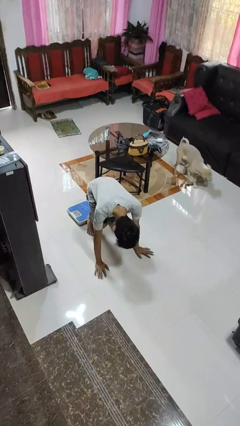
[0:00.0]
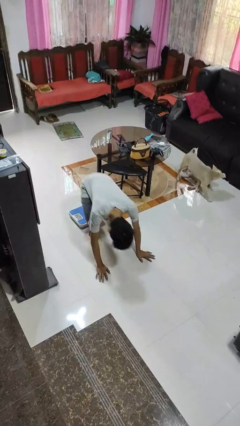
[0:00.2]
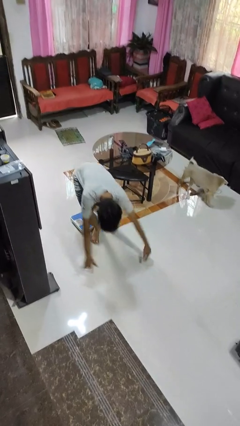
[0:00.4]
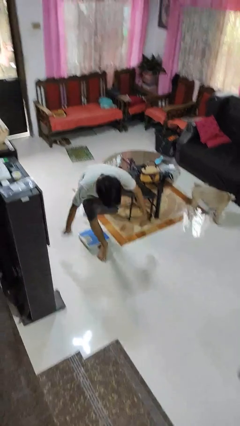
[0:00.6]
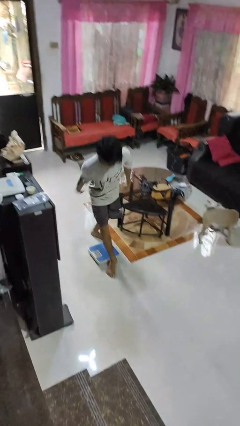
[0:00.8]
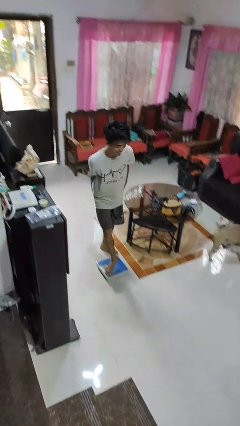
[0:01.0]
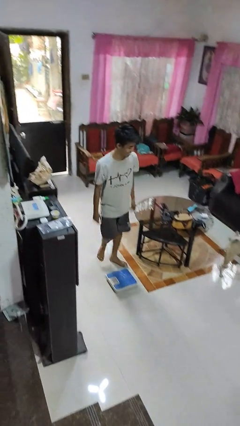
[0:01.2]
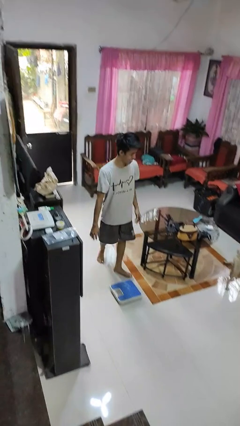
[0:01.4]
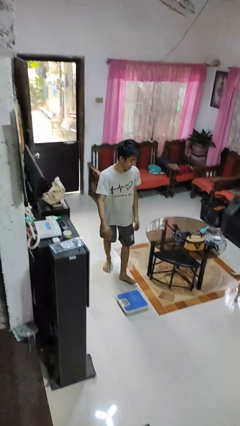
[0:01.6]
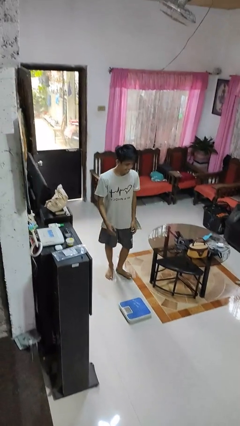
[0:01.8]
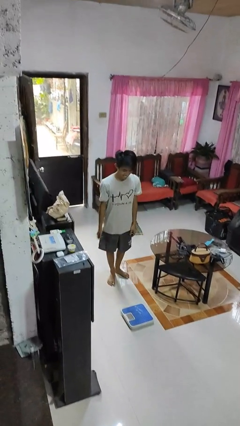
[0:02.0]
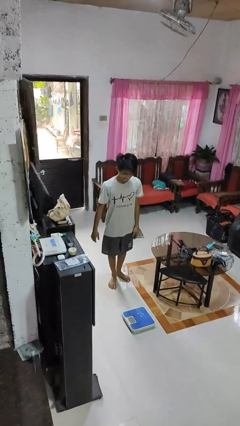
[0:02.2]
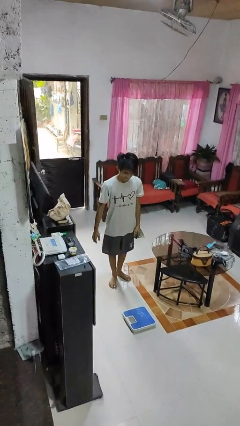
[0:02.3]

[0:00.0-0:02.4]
person stands up from floor

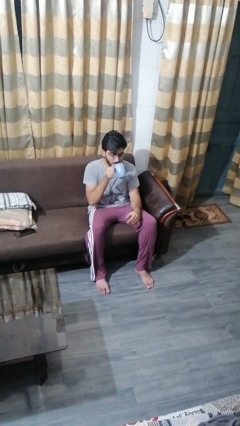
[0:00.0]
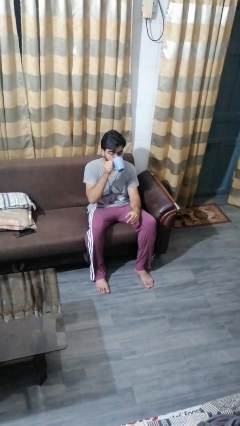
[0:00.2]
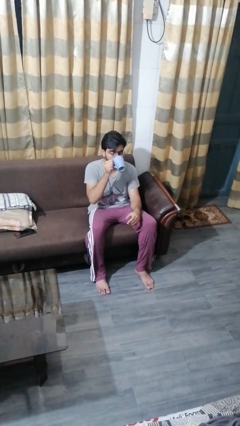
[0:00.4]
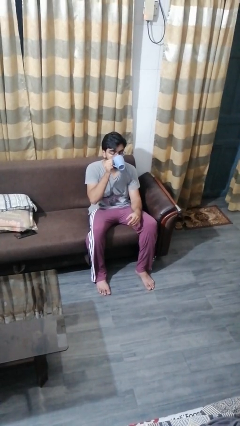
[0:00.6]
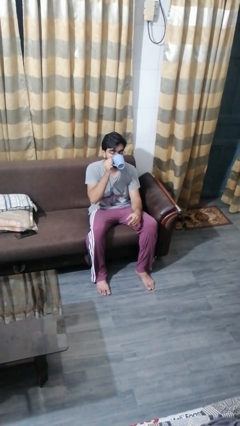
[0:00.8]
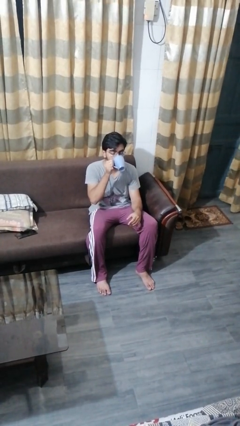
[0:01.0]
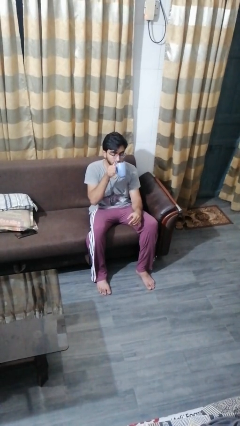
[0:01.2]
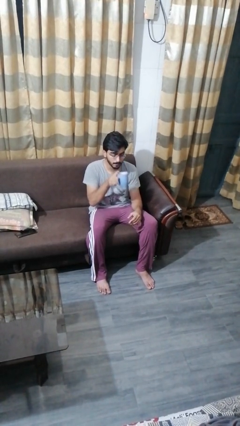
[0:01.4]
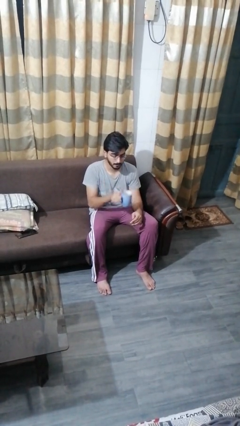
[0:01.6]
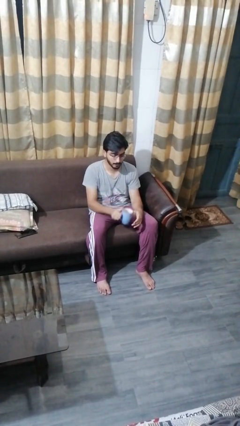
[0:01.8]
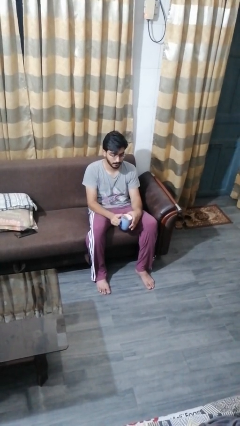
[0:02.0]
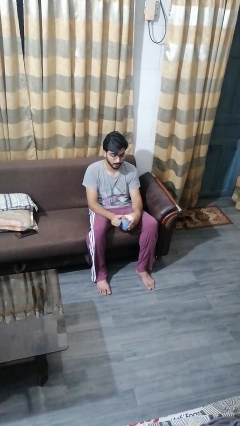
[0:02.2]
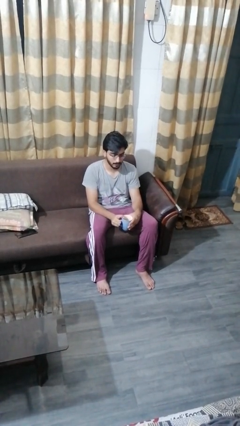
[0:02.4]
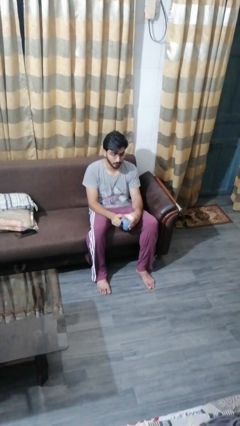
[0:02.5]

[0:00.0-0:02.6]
person drinks from mug

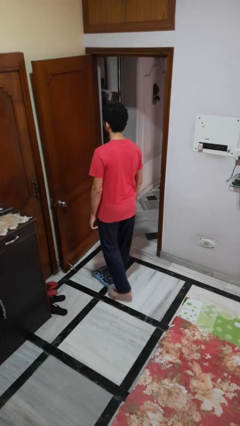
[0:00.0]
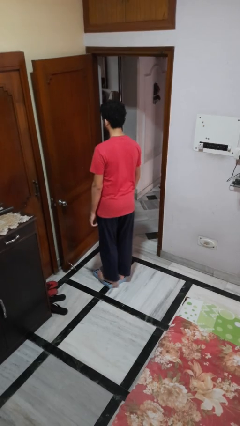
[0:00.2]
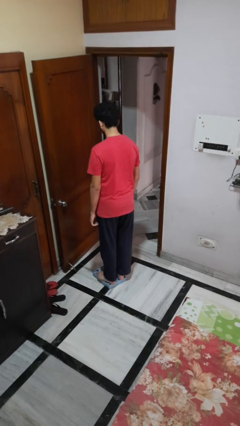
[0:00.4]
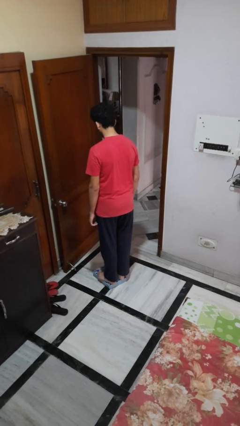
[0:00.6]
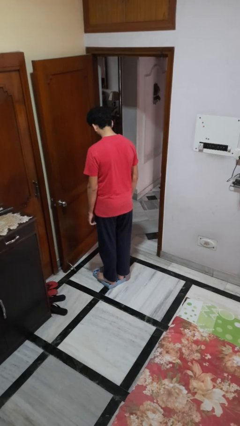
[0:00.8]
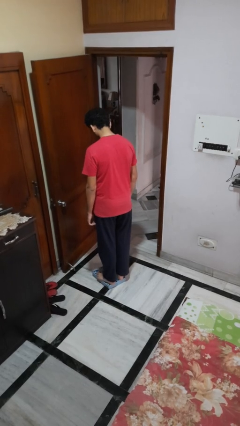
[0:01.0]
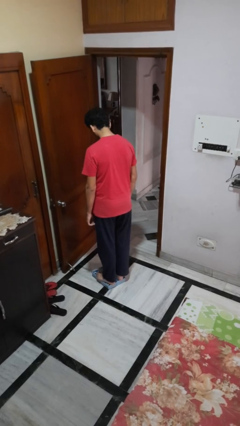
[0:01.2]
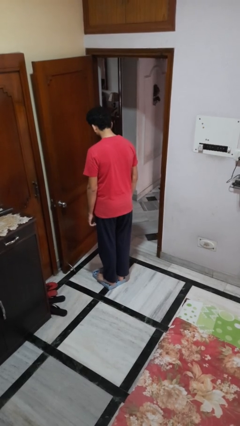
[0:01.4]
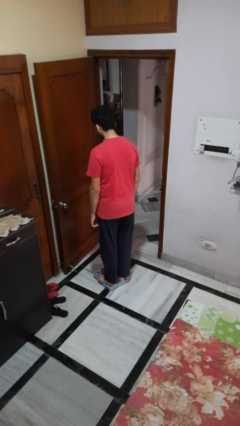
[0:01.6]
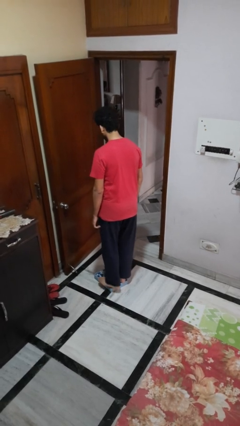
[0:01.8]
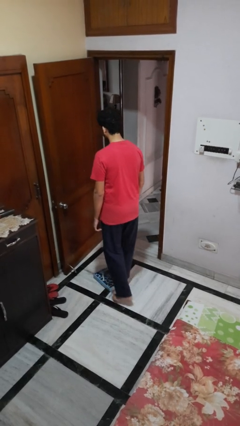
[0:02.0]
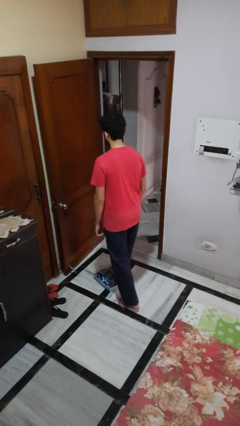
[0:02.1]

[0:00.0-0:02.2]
person uses bodyweight scale

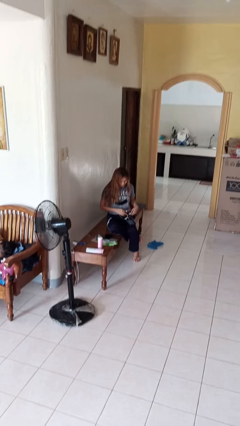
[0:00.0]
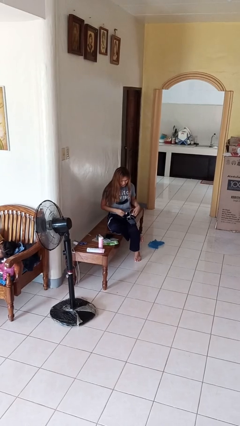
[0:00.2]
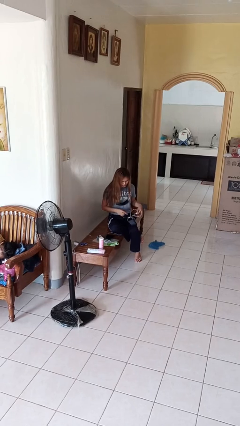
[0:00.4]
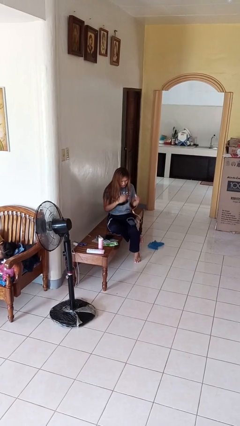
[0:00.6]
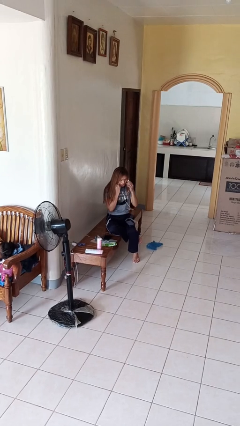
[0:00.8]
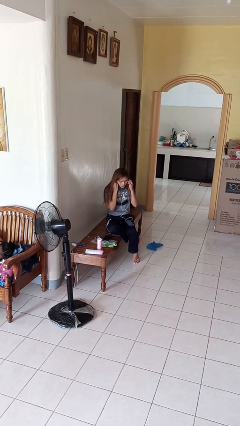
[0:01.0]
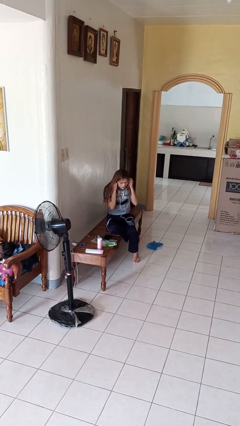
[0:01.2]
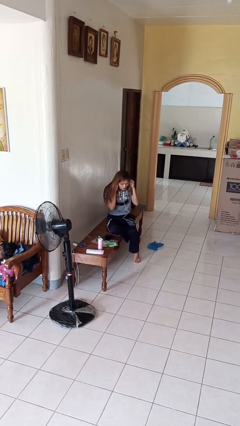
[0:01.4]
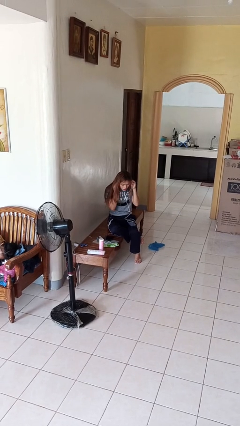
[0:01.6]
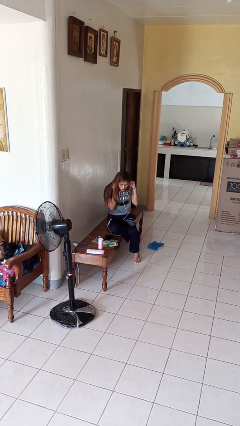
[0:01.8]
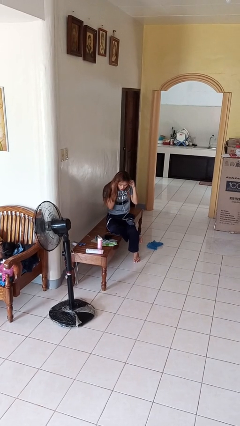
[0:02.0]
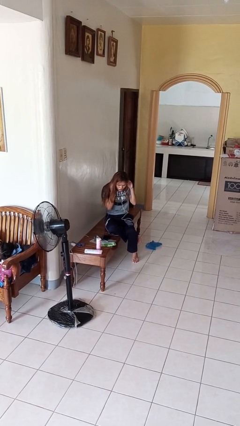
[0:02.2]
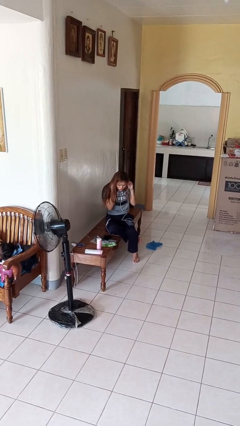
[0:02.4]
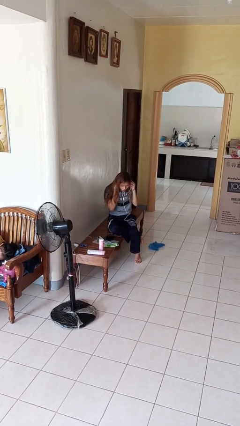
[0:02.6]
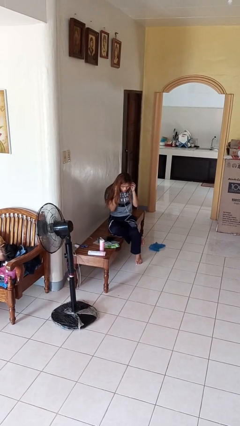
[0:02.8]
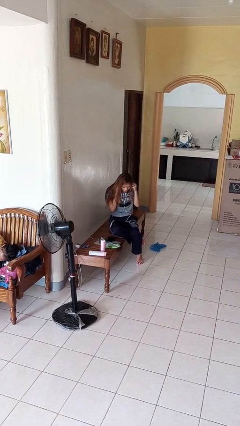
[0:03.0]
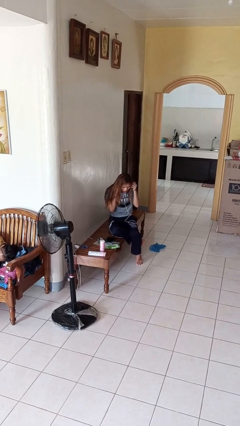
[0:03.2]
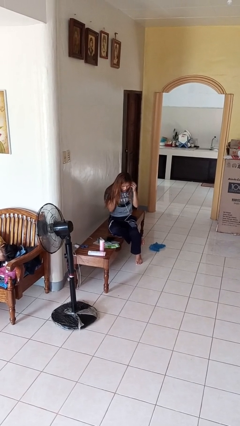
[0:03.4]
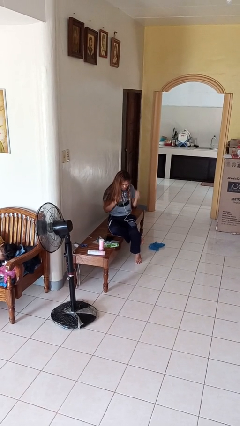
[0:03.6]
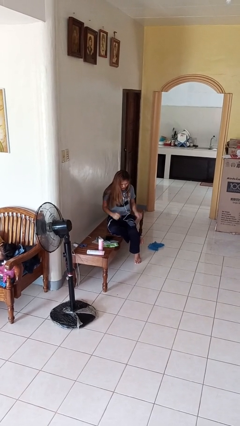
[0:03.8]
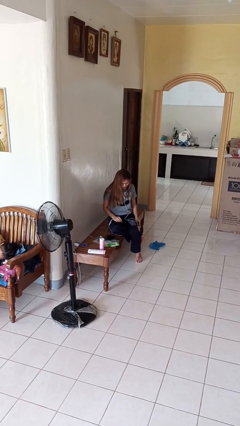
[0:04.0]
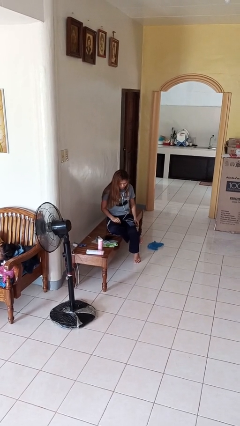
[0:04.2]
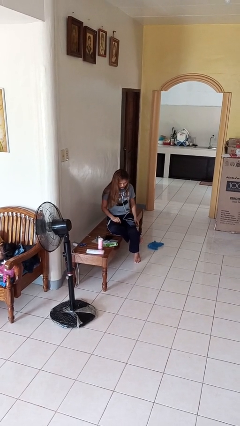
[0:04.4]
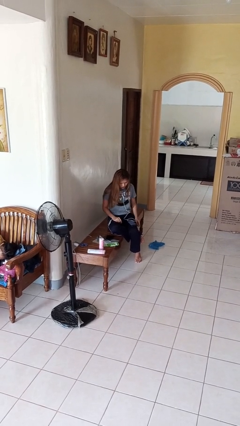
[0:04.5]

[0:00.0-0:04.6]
person puts on headphones

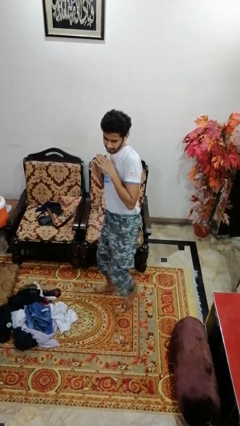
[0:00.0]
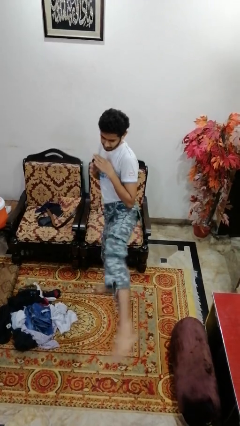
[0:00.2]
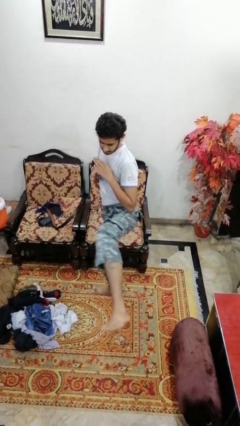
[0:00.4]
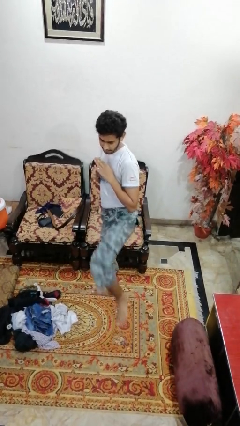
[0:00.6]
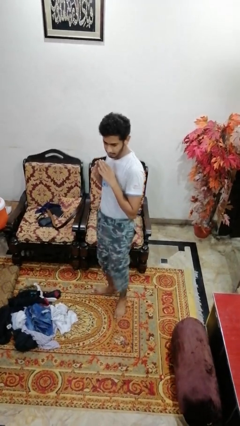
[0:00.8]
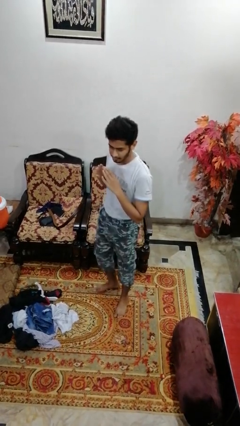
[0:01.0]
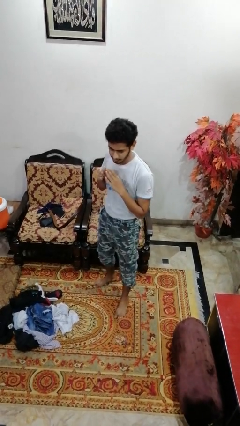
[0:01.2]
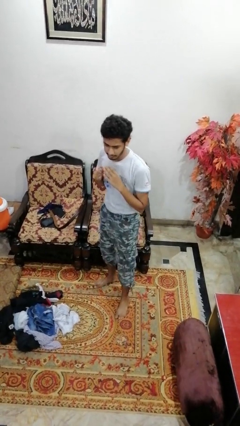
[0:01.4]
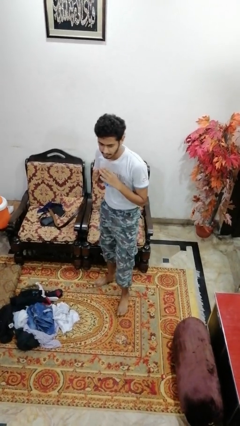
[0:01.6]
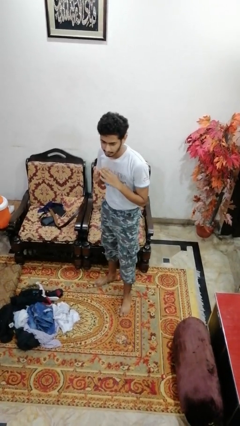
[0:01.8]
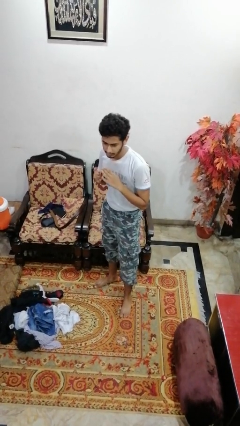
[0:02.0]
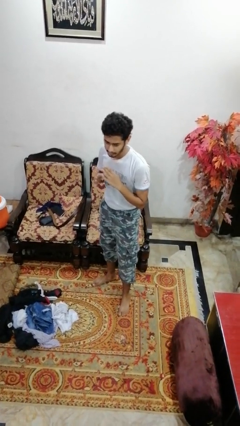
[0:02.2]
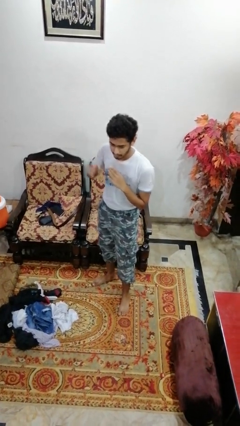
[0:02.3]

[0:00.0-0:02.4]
person karate kicks

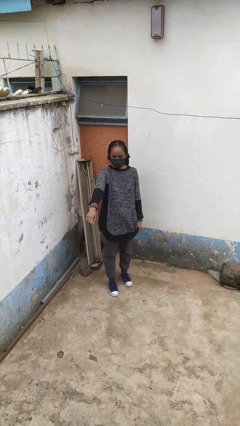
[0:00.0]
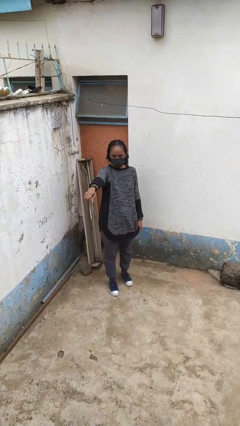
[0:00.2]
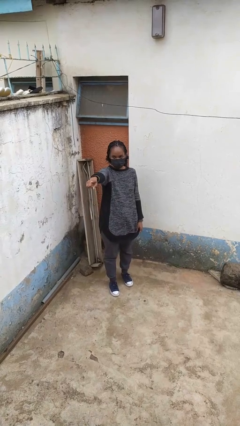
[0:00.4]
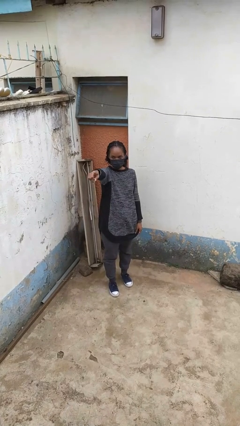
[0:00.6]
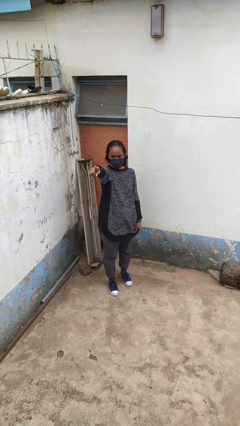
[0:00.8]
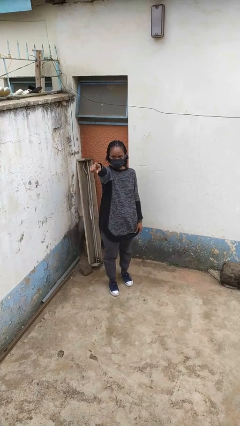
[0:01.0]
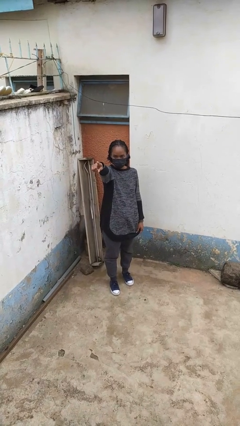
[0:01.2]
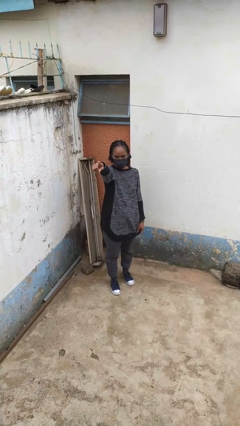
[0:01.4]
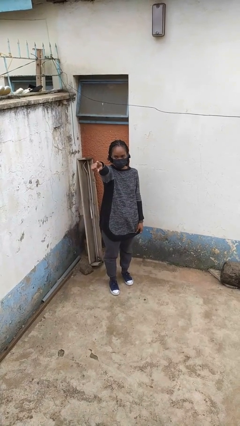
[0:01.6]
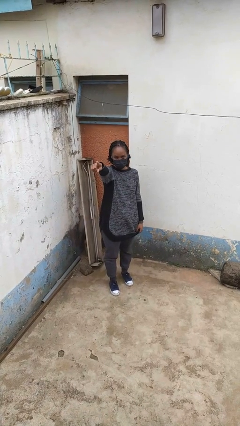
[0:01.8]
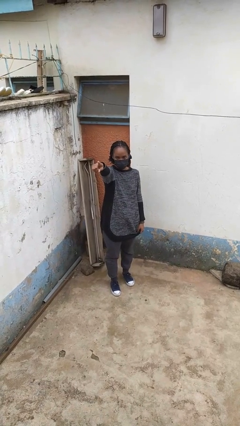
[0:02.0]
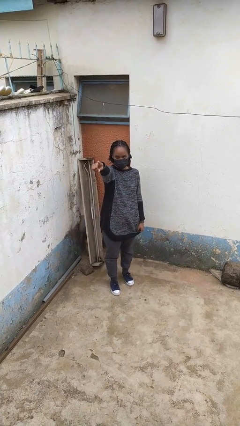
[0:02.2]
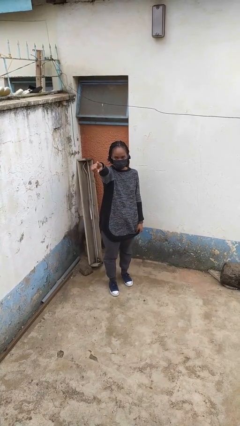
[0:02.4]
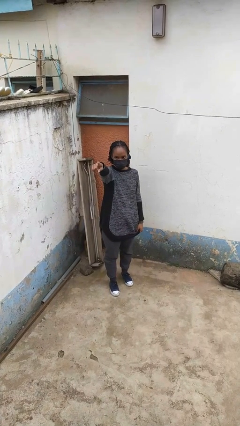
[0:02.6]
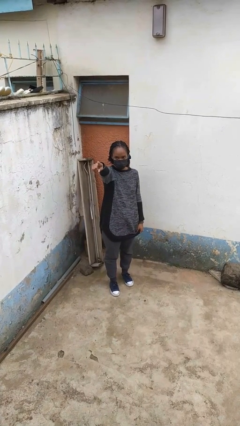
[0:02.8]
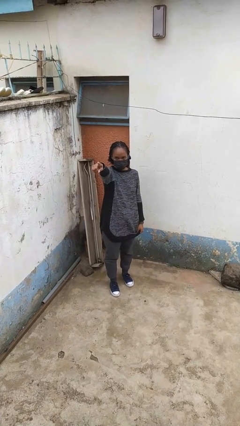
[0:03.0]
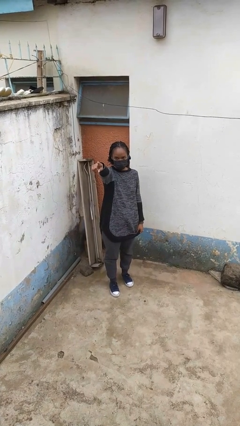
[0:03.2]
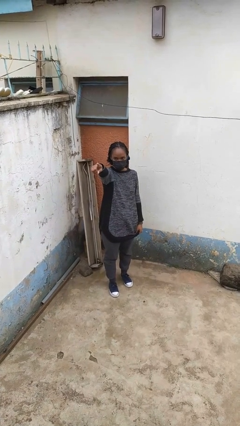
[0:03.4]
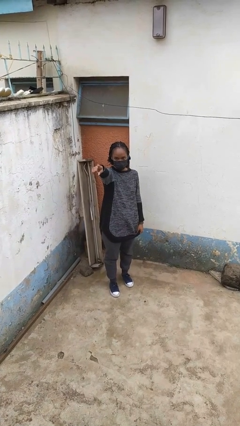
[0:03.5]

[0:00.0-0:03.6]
person points at person
